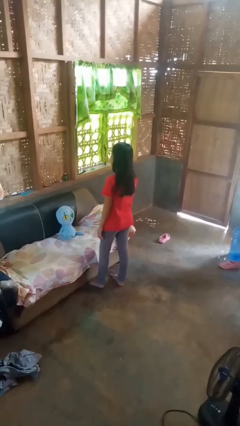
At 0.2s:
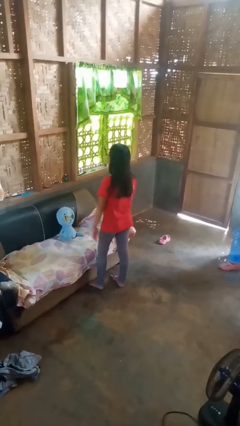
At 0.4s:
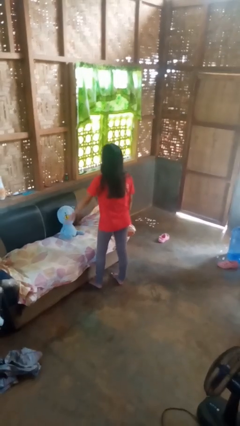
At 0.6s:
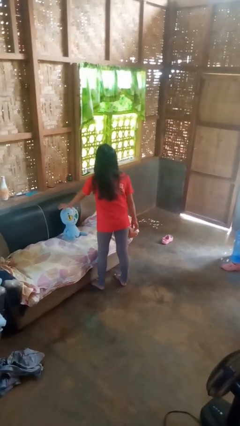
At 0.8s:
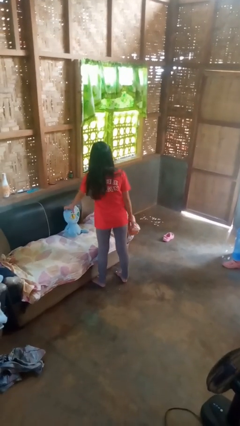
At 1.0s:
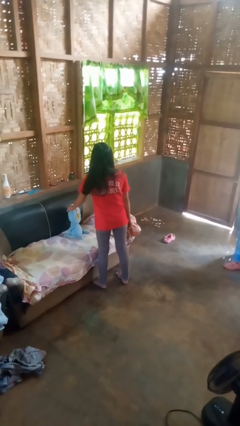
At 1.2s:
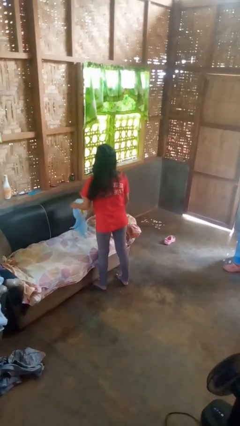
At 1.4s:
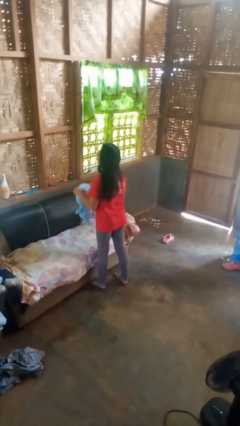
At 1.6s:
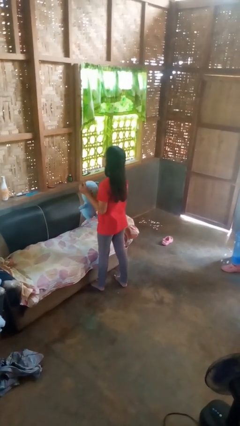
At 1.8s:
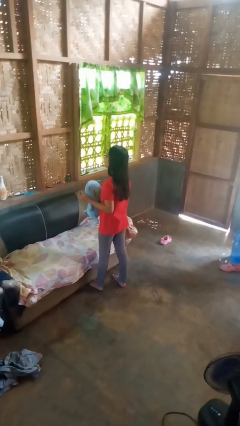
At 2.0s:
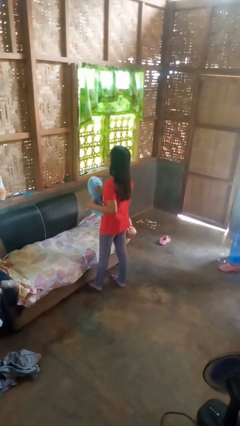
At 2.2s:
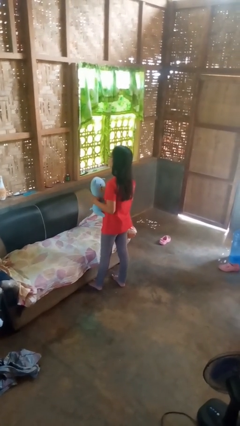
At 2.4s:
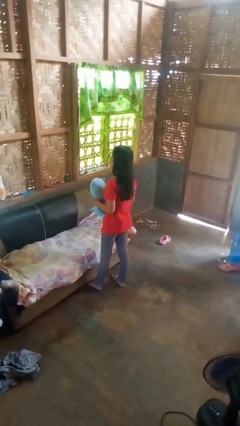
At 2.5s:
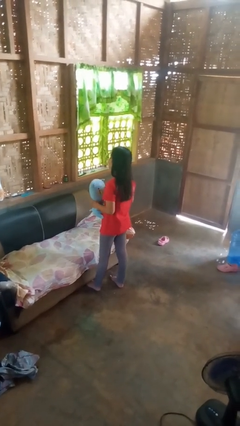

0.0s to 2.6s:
person picks up object from couch

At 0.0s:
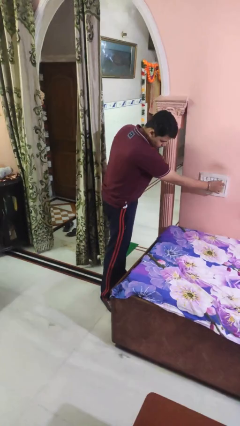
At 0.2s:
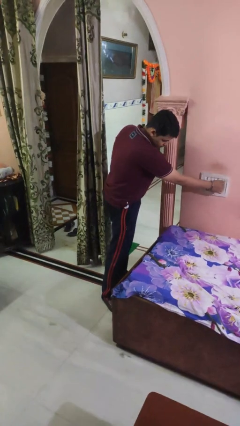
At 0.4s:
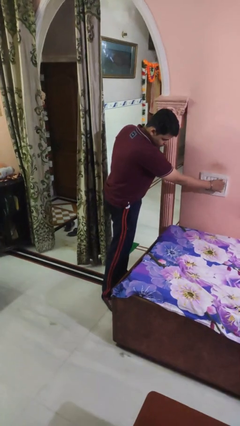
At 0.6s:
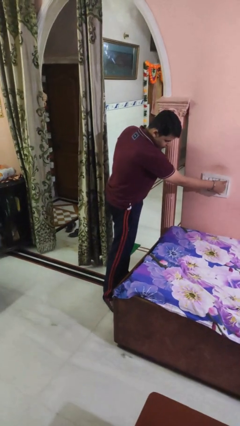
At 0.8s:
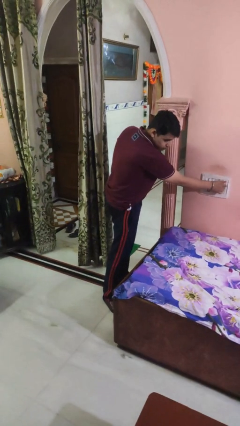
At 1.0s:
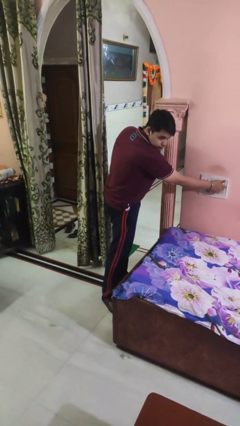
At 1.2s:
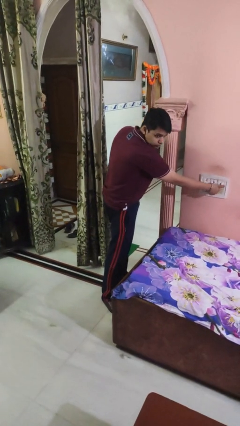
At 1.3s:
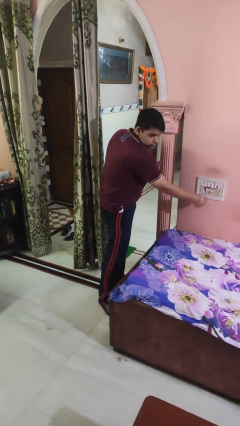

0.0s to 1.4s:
person adjusts thermostat

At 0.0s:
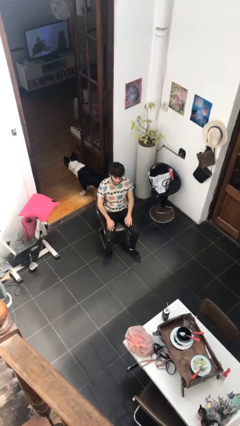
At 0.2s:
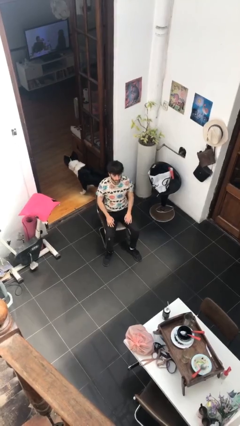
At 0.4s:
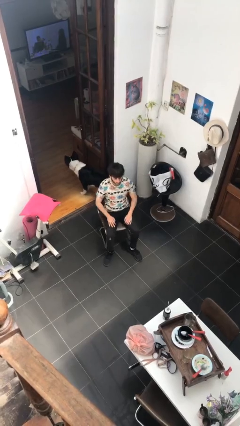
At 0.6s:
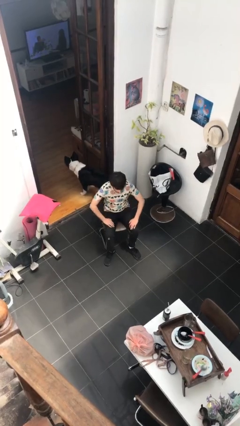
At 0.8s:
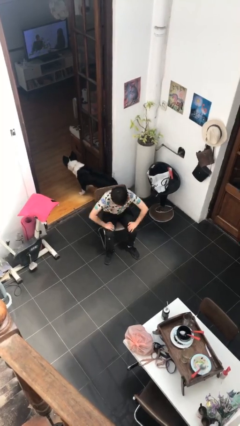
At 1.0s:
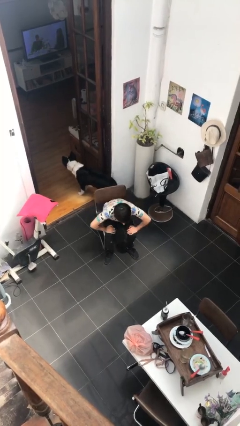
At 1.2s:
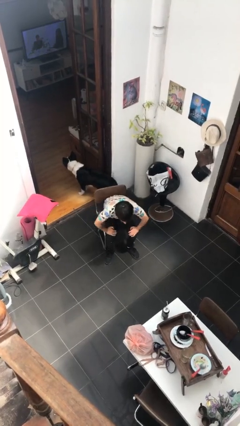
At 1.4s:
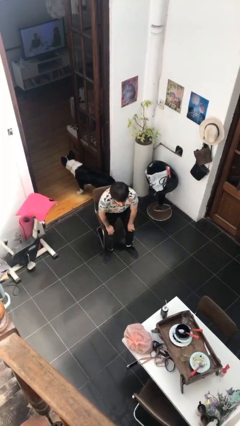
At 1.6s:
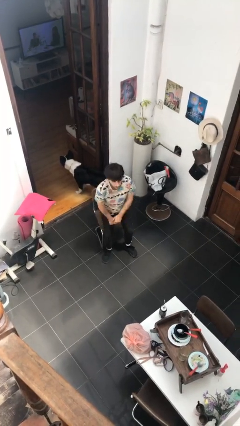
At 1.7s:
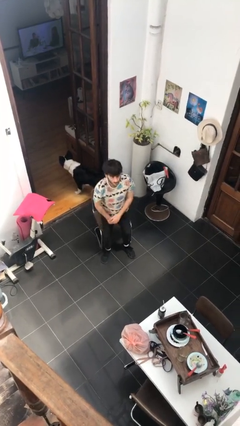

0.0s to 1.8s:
person stands up

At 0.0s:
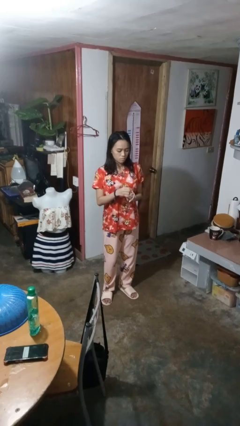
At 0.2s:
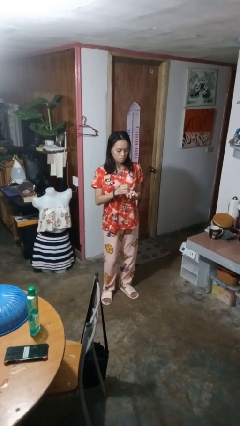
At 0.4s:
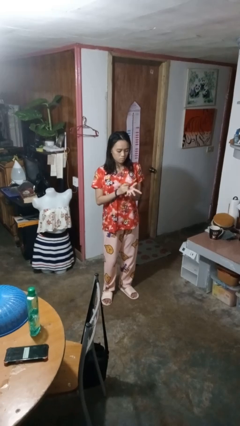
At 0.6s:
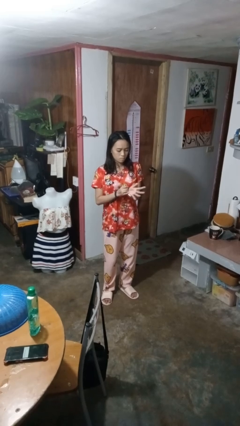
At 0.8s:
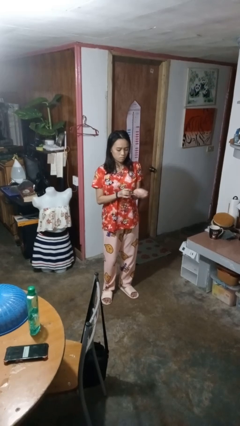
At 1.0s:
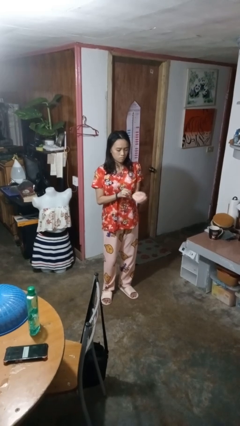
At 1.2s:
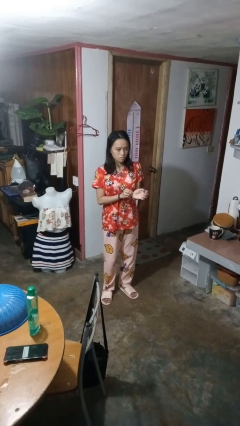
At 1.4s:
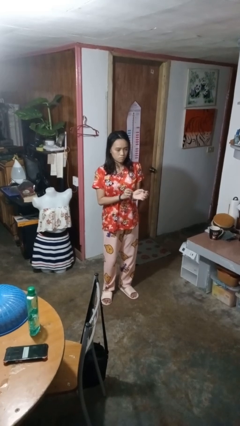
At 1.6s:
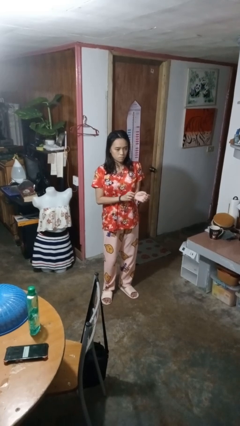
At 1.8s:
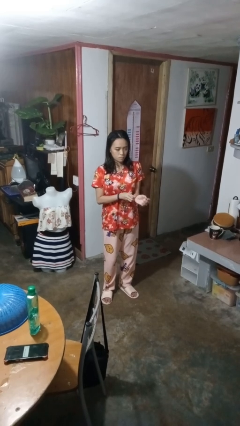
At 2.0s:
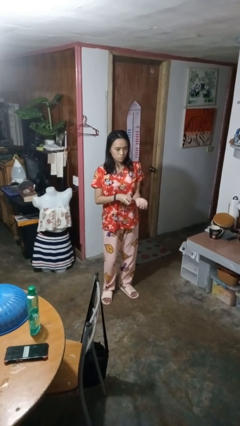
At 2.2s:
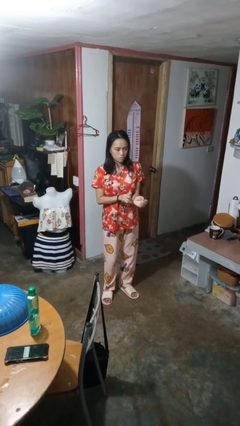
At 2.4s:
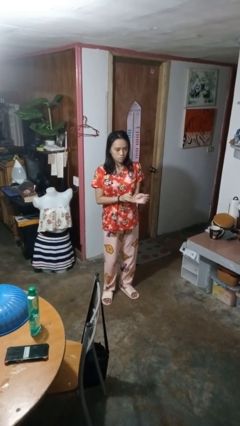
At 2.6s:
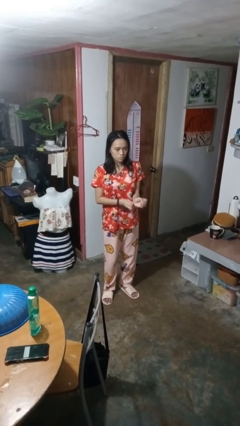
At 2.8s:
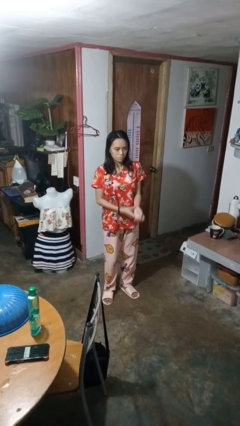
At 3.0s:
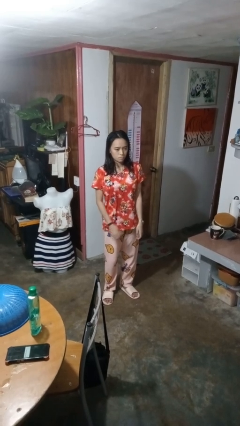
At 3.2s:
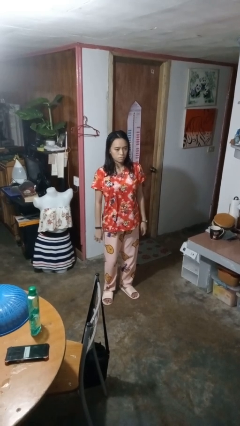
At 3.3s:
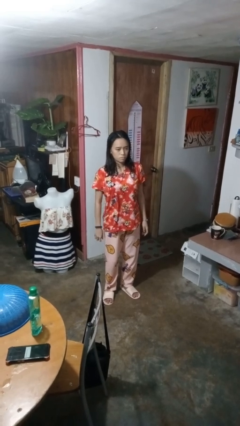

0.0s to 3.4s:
person puts on wristwatch

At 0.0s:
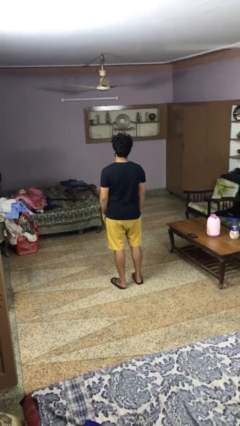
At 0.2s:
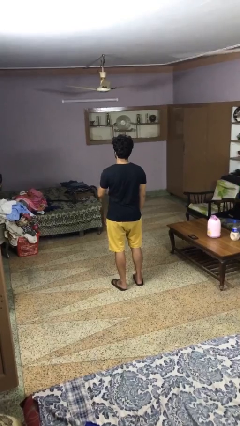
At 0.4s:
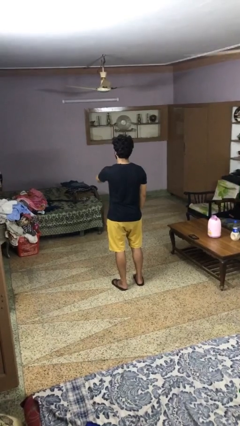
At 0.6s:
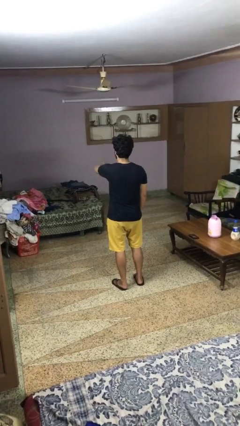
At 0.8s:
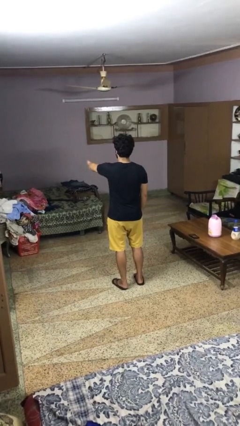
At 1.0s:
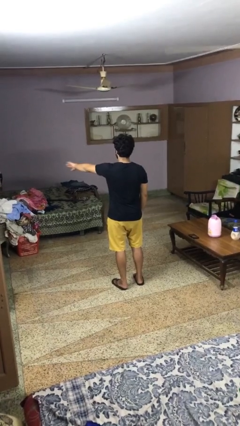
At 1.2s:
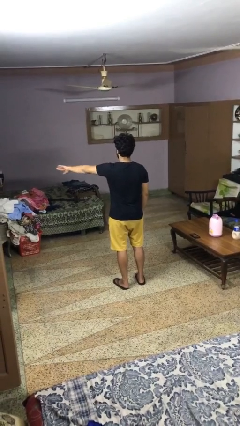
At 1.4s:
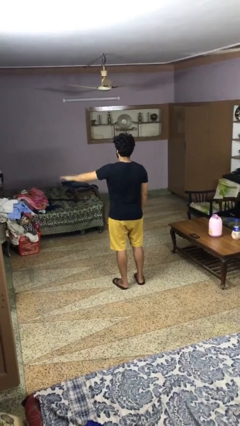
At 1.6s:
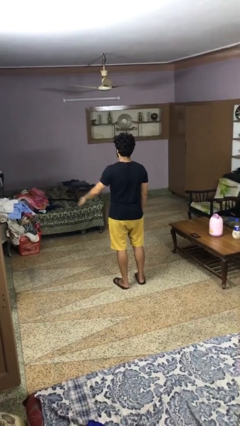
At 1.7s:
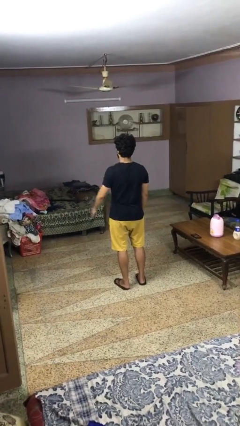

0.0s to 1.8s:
person gestures swipe left

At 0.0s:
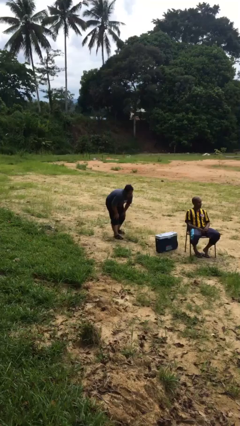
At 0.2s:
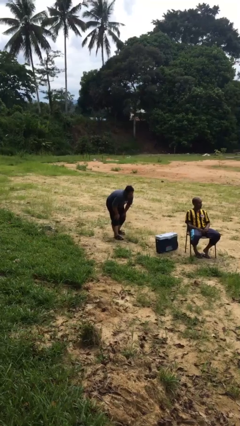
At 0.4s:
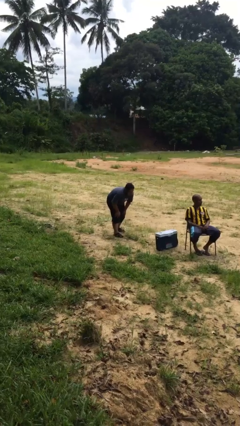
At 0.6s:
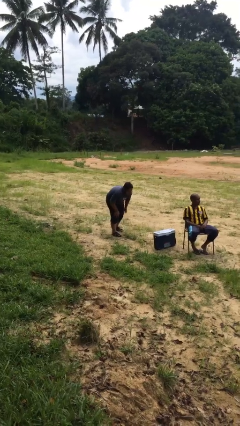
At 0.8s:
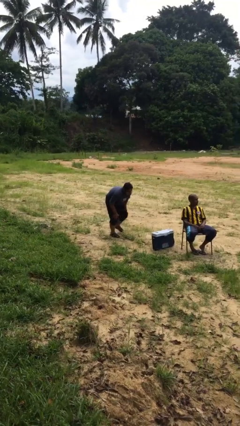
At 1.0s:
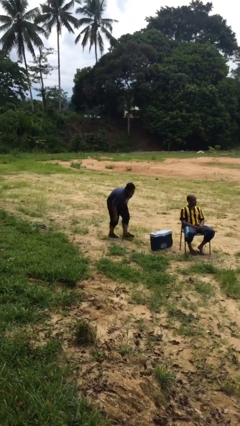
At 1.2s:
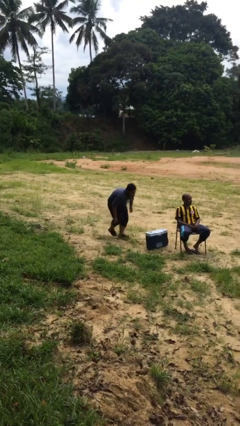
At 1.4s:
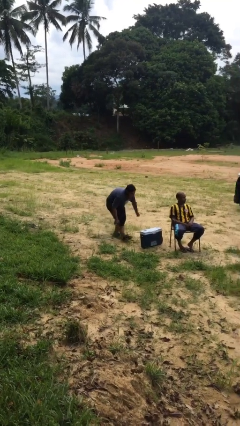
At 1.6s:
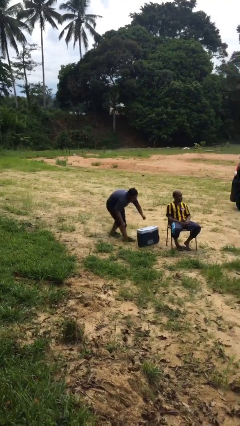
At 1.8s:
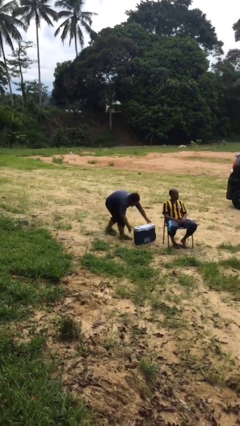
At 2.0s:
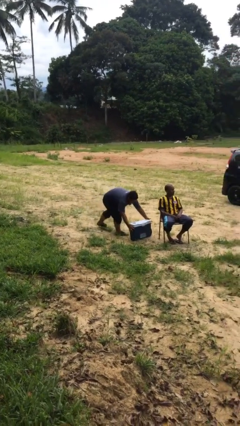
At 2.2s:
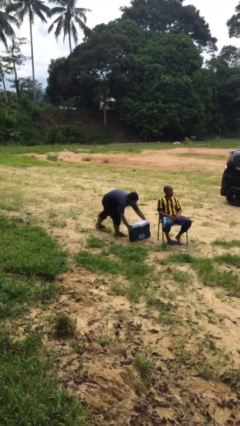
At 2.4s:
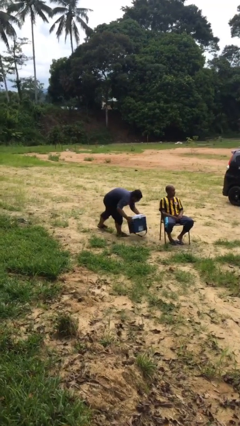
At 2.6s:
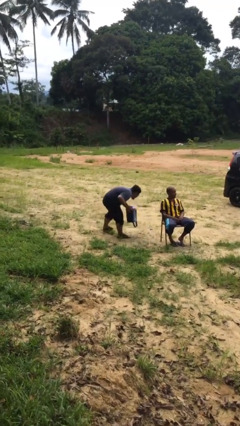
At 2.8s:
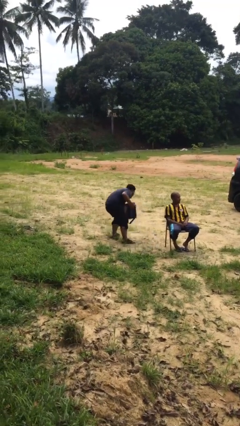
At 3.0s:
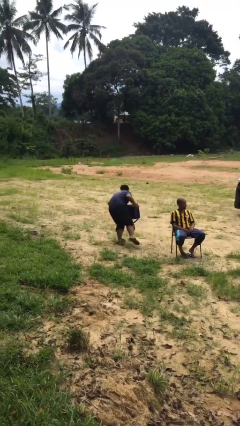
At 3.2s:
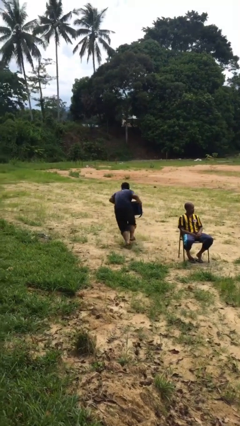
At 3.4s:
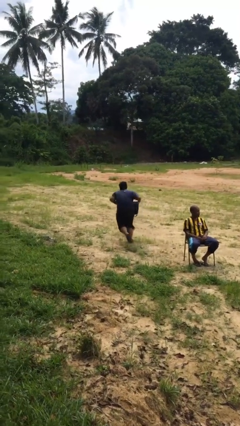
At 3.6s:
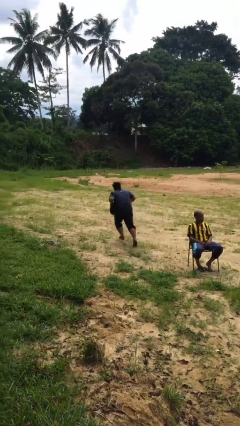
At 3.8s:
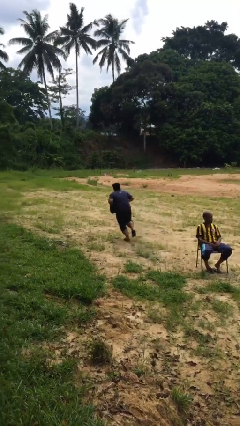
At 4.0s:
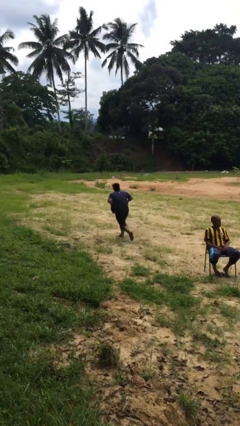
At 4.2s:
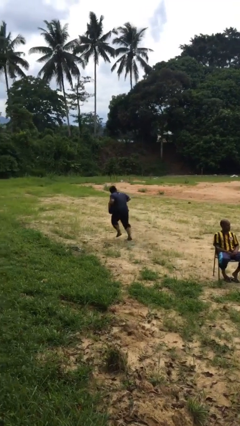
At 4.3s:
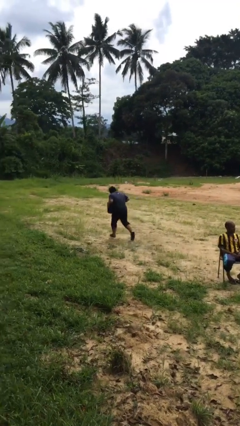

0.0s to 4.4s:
person steals object from person

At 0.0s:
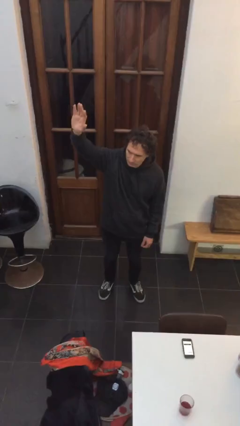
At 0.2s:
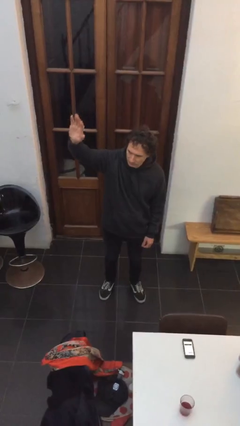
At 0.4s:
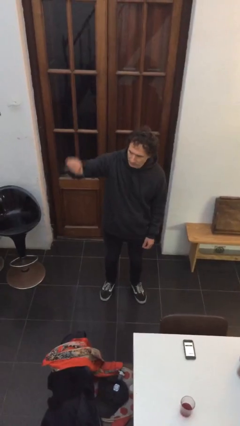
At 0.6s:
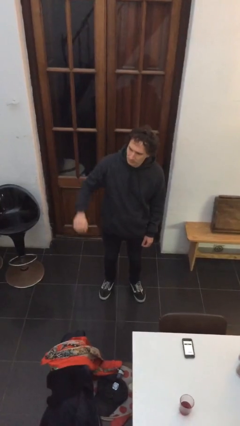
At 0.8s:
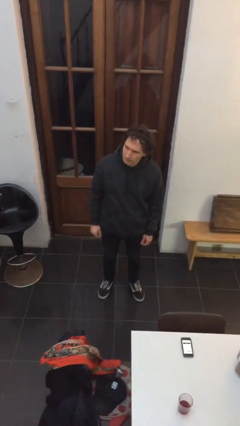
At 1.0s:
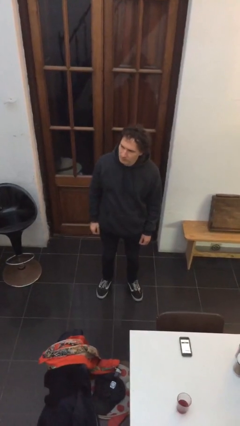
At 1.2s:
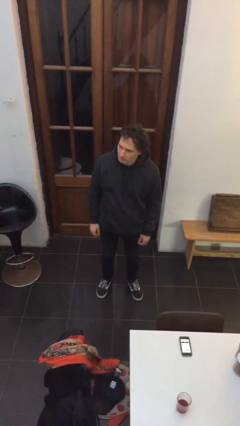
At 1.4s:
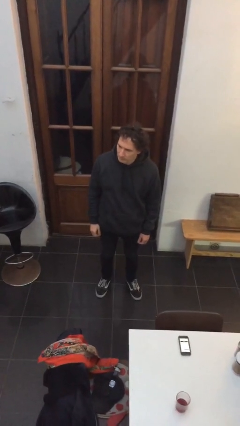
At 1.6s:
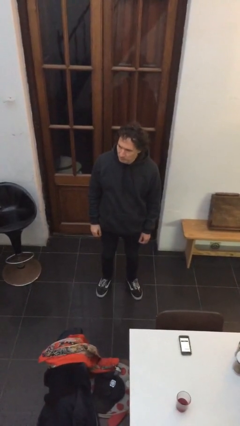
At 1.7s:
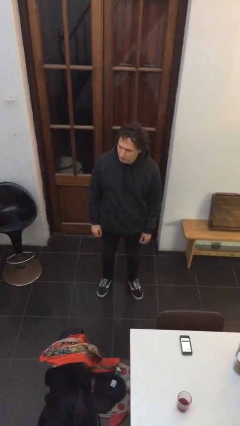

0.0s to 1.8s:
person gestures lower hand

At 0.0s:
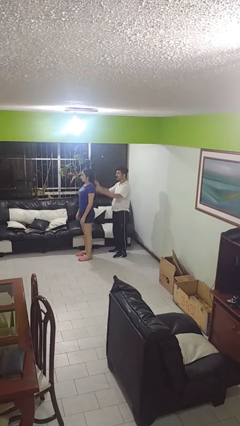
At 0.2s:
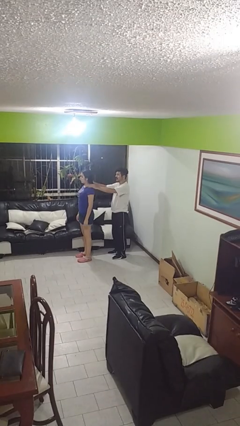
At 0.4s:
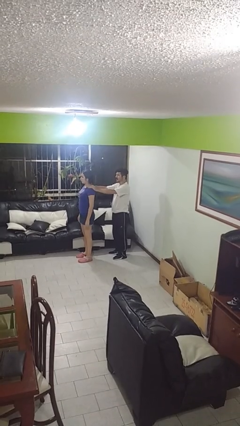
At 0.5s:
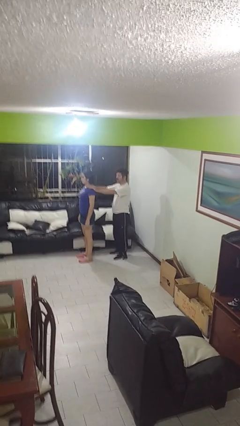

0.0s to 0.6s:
person grabs person by shoulder
